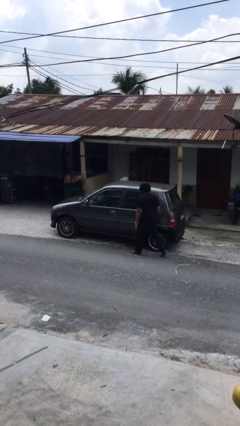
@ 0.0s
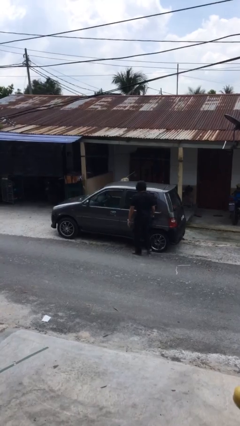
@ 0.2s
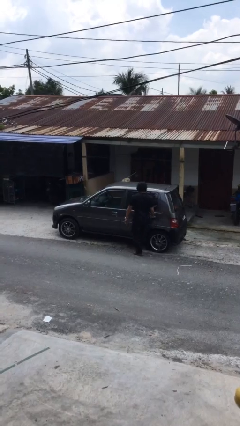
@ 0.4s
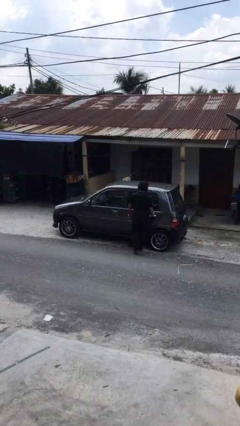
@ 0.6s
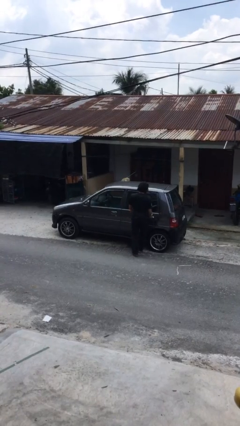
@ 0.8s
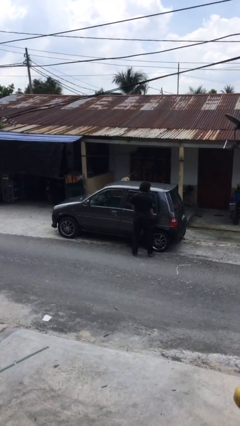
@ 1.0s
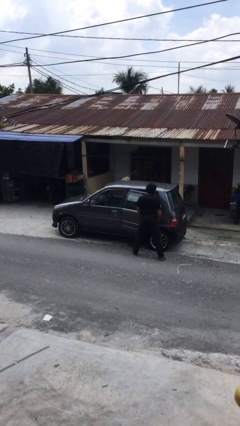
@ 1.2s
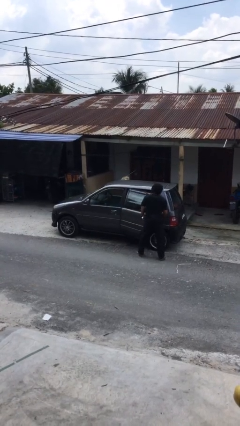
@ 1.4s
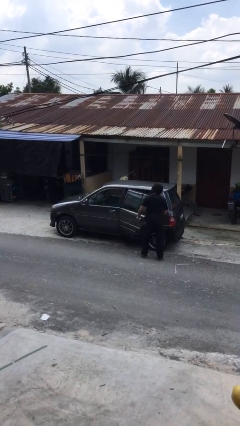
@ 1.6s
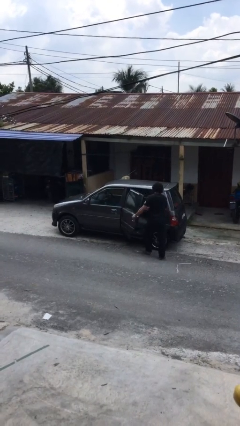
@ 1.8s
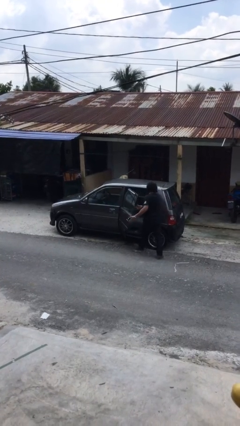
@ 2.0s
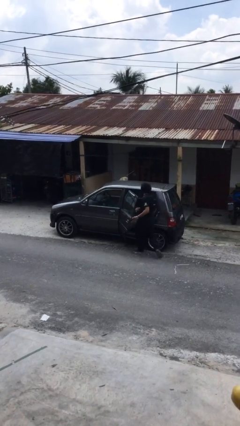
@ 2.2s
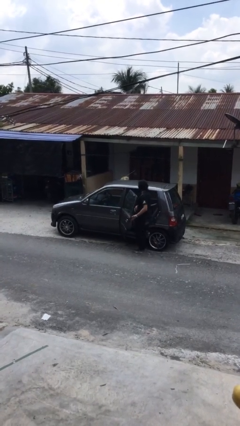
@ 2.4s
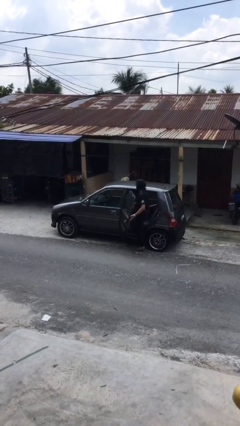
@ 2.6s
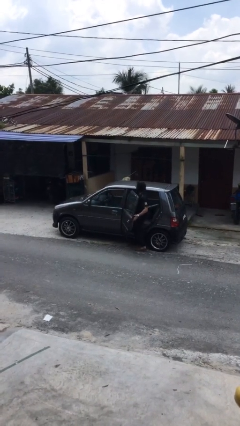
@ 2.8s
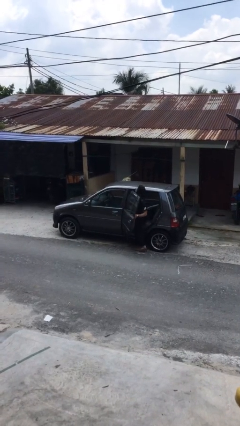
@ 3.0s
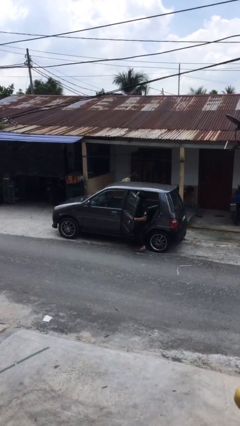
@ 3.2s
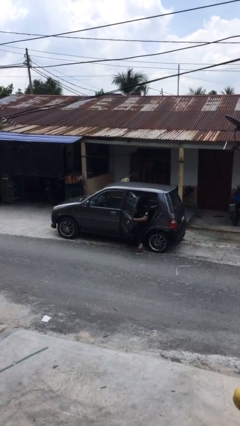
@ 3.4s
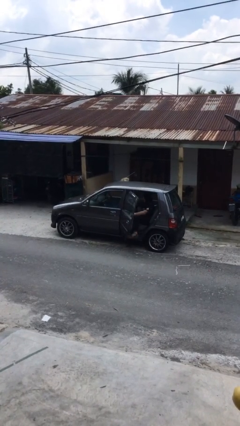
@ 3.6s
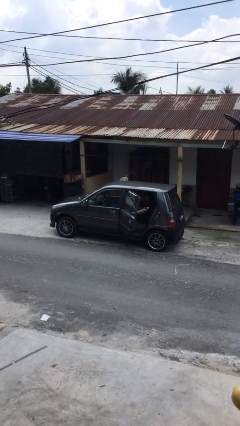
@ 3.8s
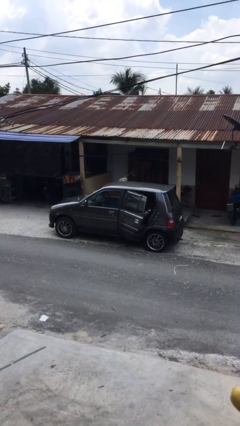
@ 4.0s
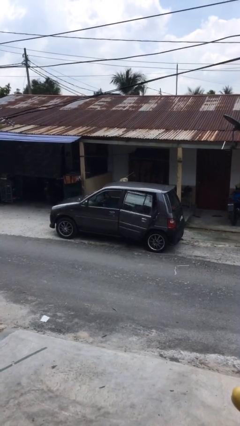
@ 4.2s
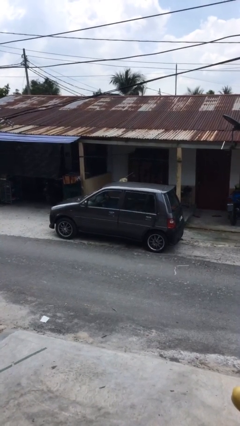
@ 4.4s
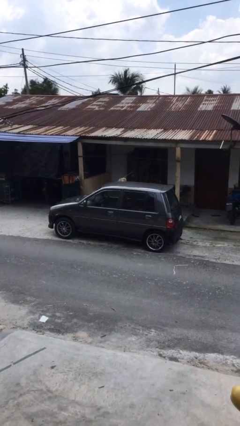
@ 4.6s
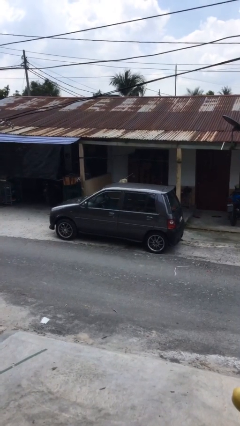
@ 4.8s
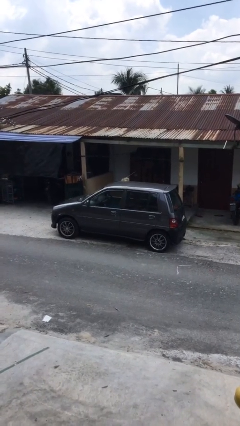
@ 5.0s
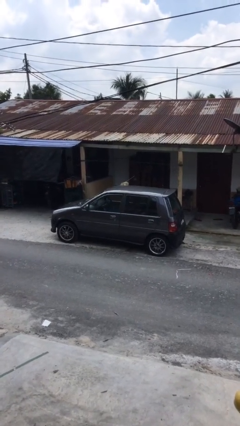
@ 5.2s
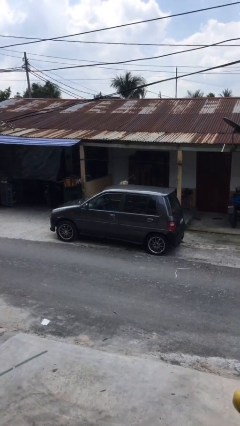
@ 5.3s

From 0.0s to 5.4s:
car picks up person

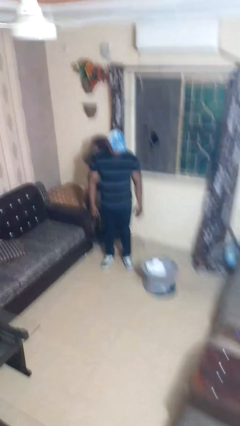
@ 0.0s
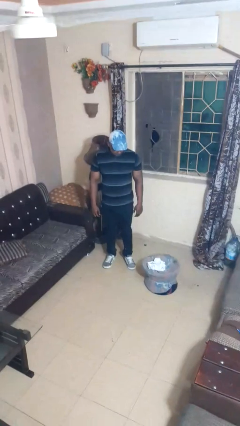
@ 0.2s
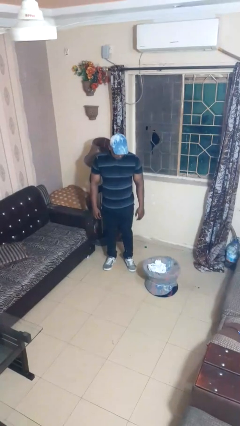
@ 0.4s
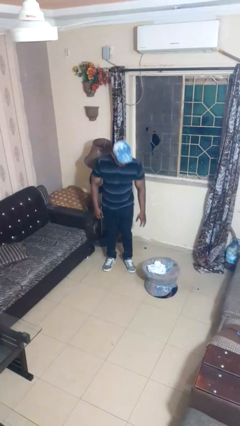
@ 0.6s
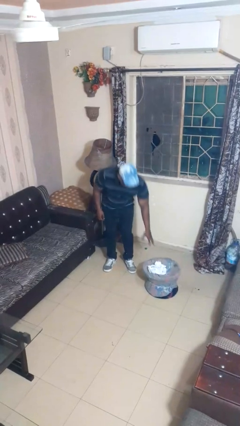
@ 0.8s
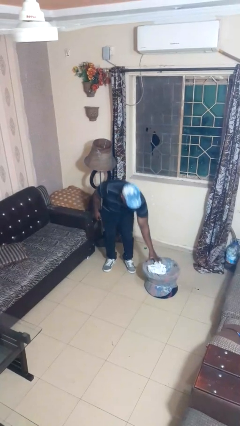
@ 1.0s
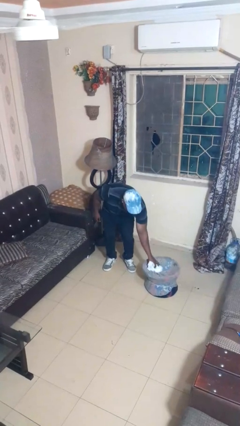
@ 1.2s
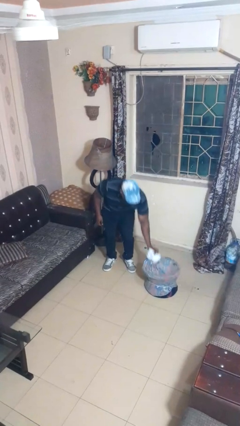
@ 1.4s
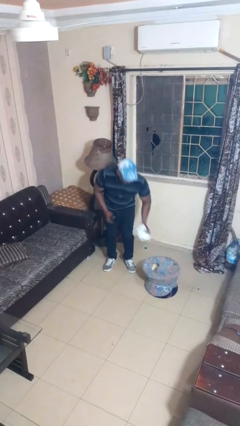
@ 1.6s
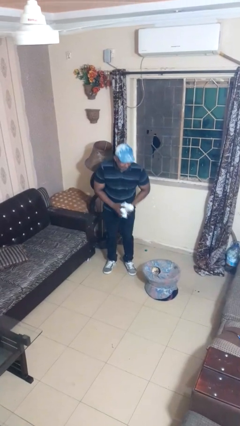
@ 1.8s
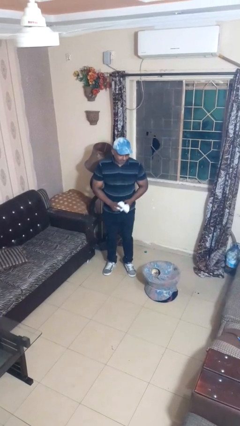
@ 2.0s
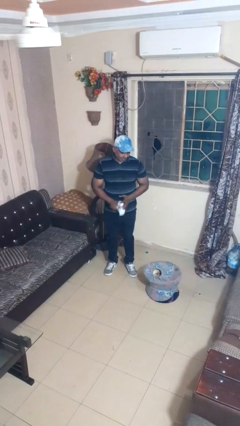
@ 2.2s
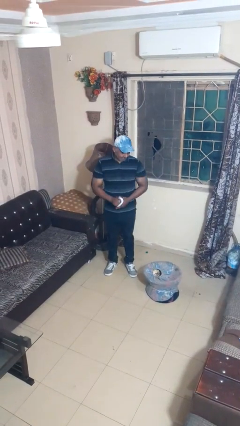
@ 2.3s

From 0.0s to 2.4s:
person takes object from basket

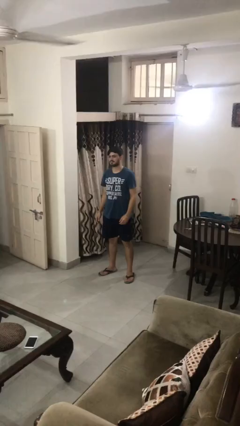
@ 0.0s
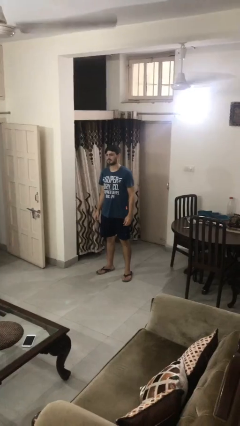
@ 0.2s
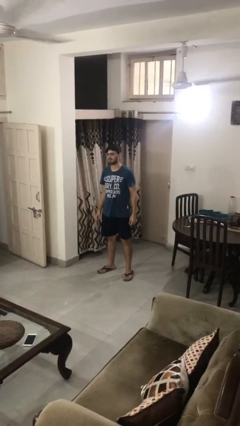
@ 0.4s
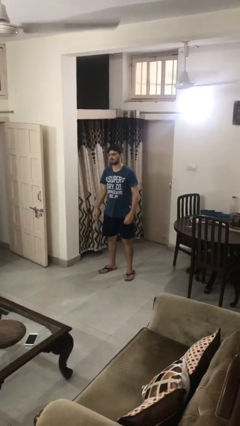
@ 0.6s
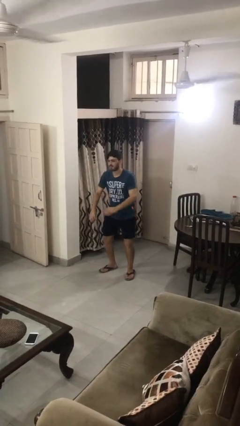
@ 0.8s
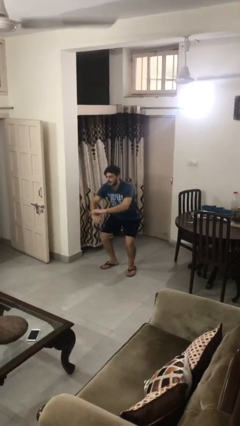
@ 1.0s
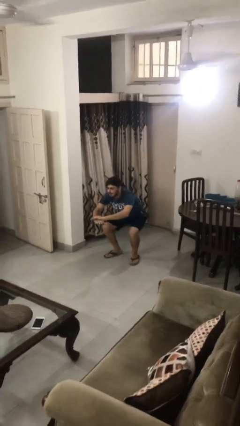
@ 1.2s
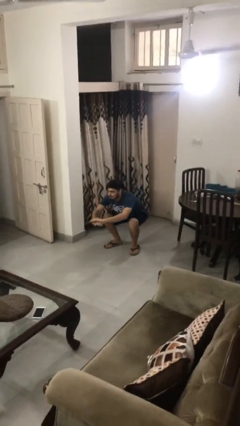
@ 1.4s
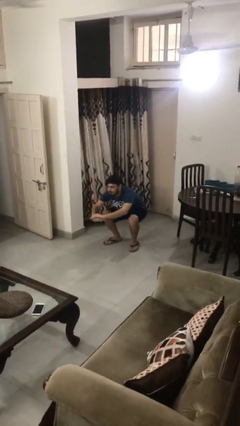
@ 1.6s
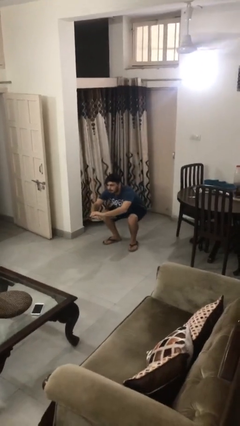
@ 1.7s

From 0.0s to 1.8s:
person squats

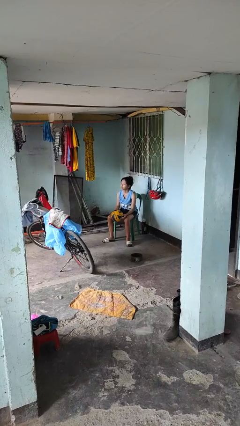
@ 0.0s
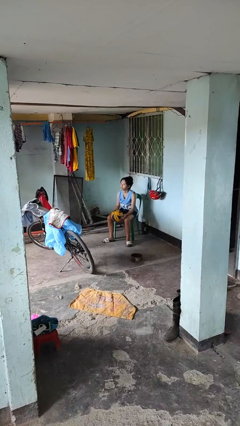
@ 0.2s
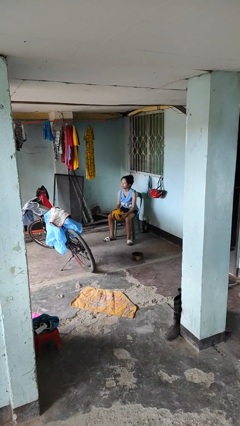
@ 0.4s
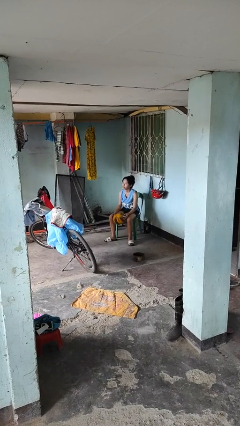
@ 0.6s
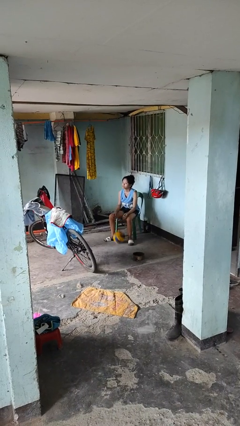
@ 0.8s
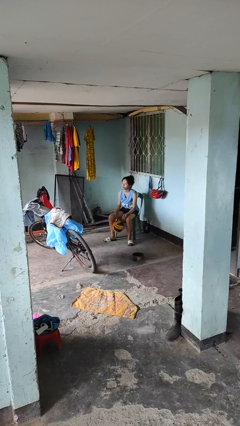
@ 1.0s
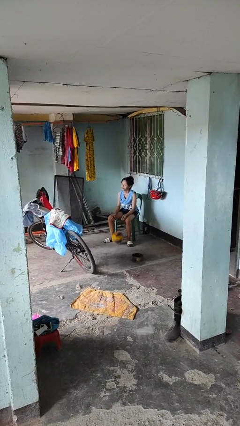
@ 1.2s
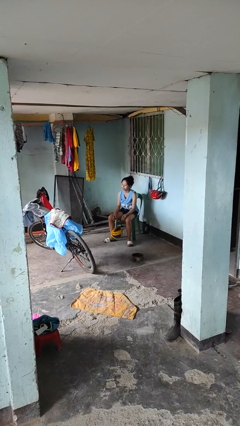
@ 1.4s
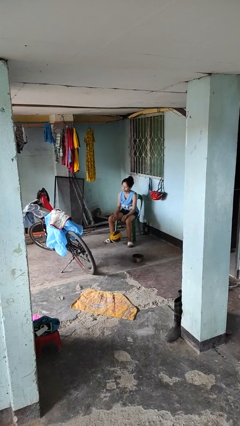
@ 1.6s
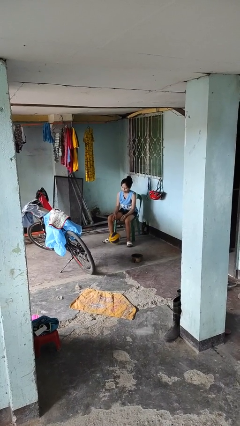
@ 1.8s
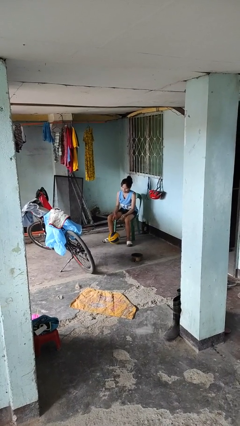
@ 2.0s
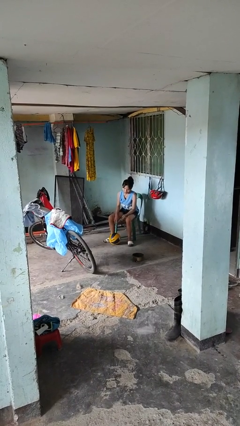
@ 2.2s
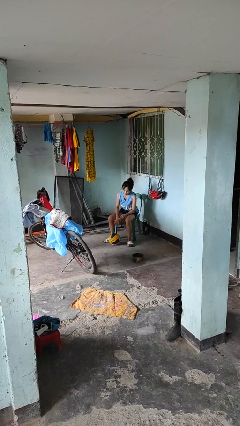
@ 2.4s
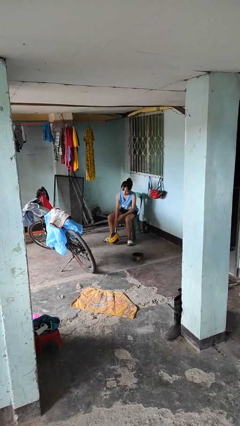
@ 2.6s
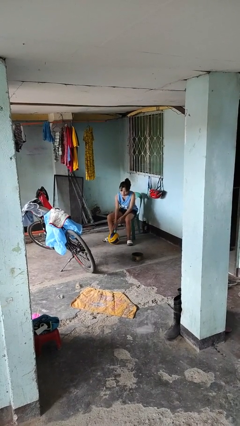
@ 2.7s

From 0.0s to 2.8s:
person drops object

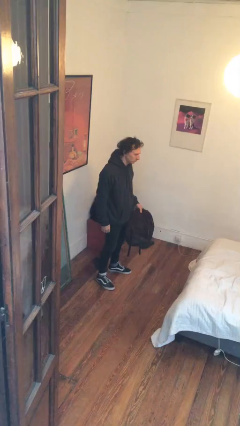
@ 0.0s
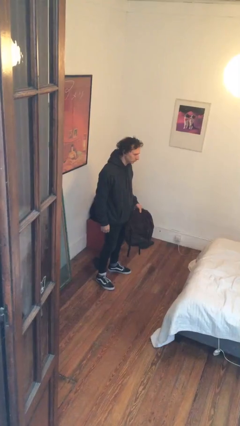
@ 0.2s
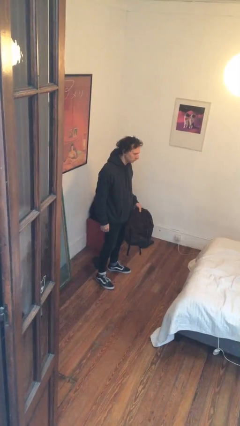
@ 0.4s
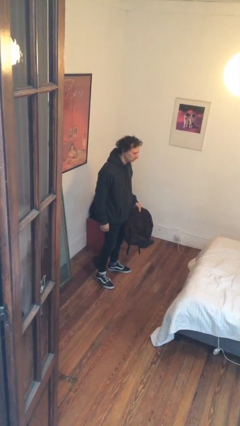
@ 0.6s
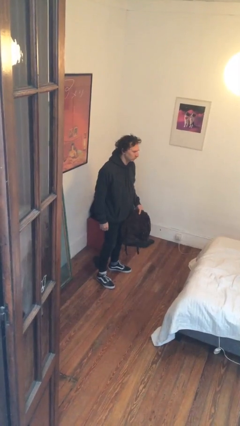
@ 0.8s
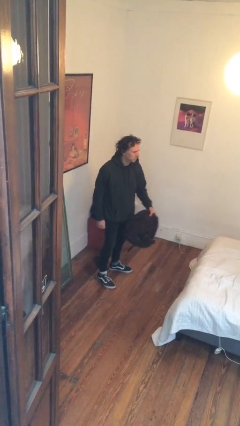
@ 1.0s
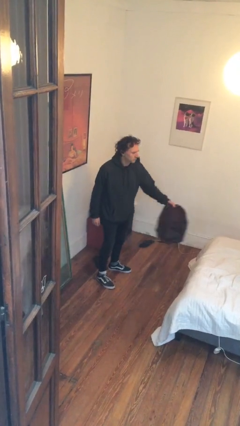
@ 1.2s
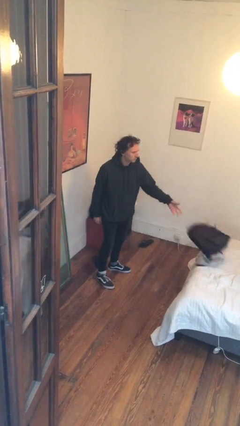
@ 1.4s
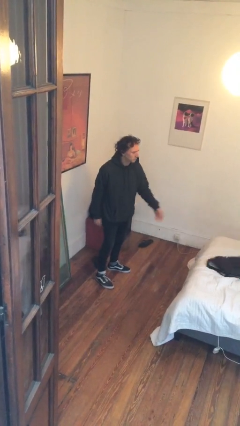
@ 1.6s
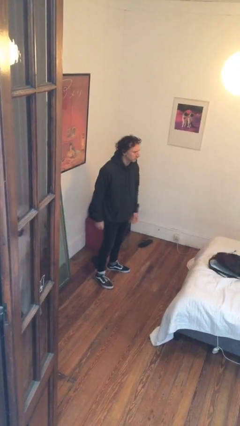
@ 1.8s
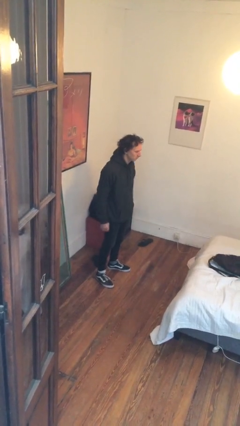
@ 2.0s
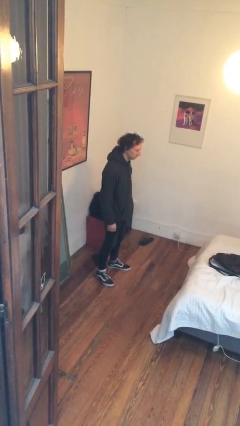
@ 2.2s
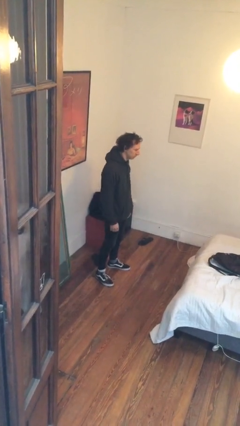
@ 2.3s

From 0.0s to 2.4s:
person throws object on bed

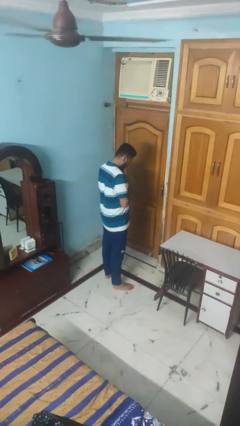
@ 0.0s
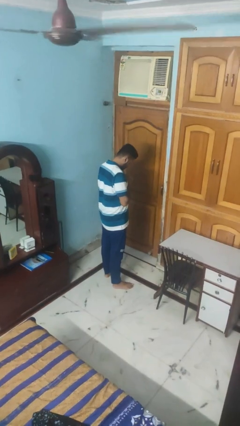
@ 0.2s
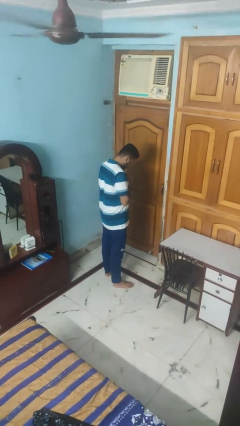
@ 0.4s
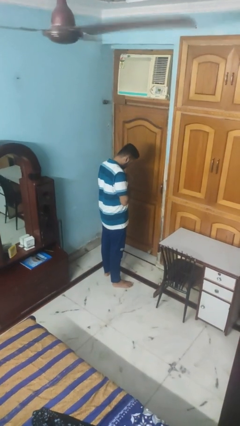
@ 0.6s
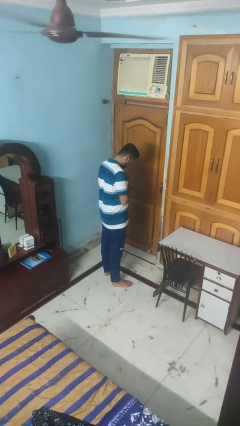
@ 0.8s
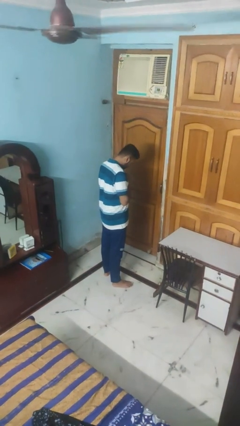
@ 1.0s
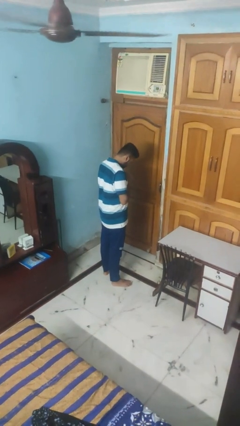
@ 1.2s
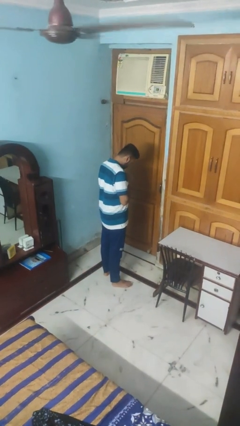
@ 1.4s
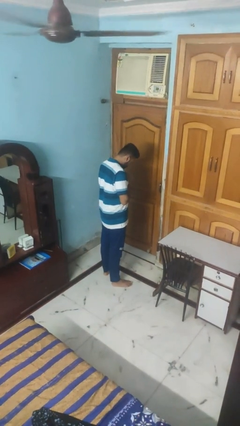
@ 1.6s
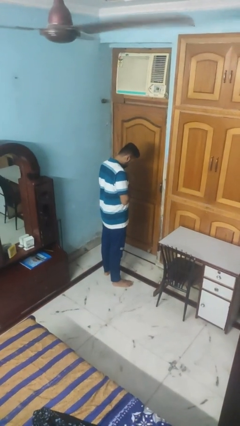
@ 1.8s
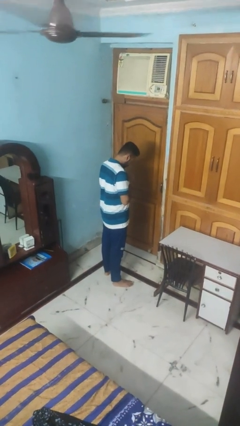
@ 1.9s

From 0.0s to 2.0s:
person prays

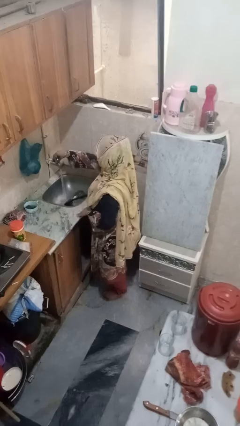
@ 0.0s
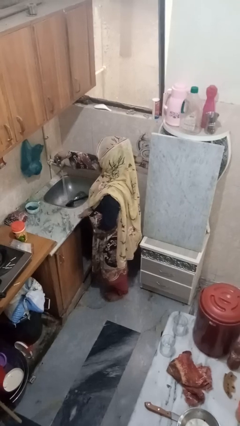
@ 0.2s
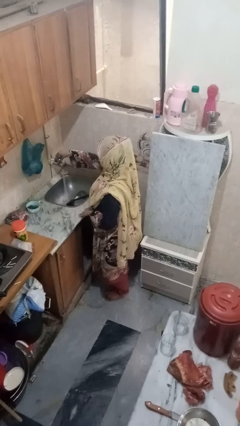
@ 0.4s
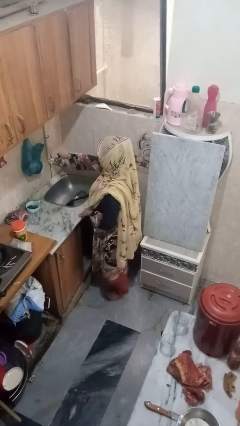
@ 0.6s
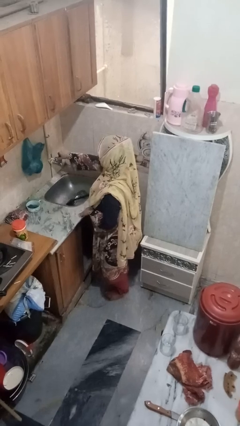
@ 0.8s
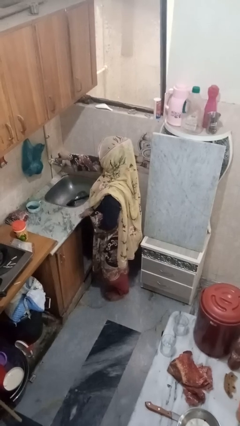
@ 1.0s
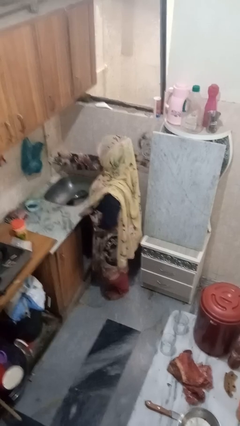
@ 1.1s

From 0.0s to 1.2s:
person turns off faucet
